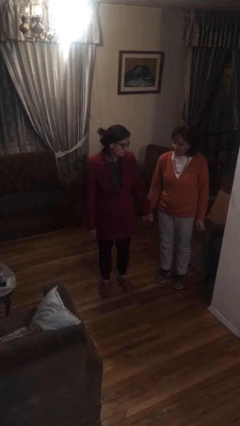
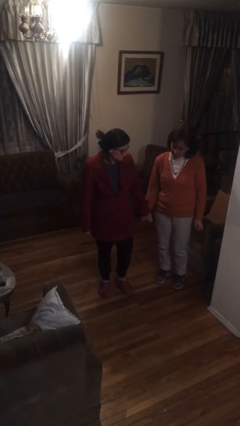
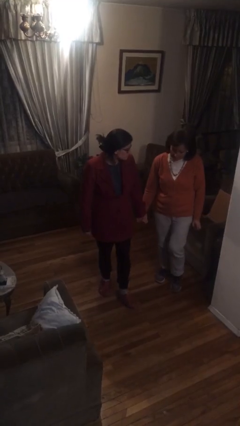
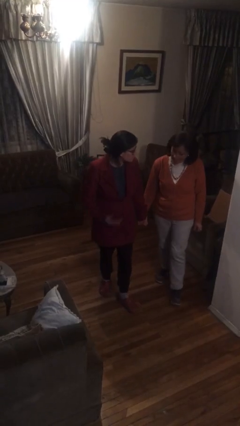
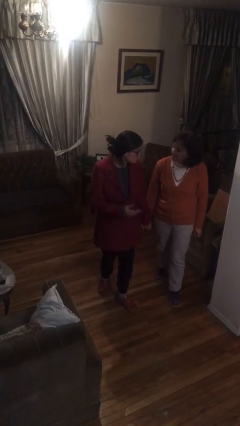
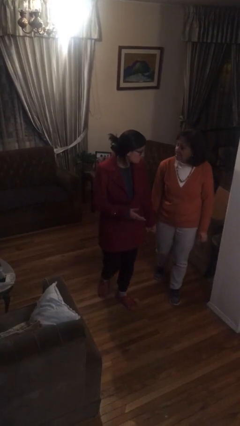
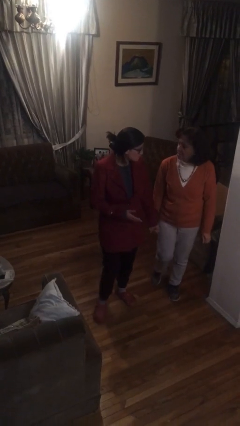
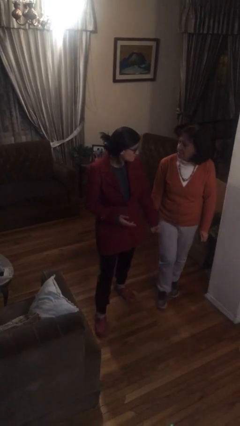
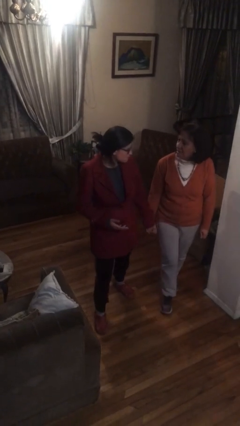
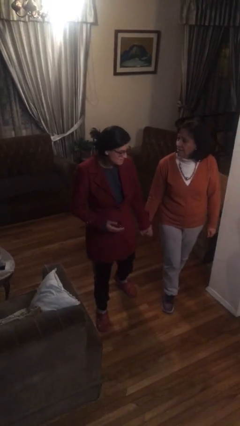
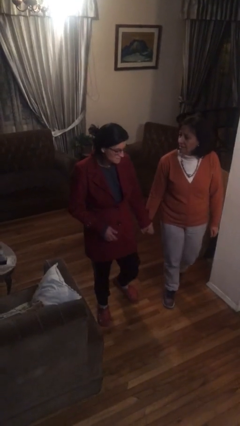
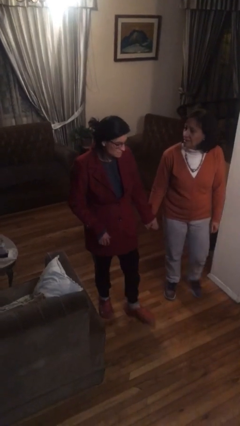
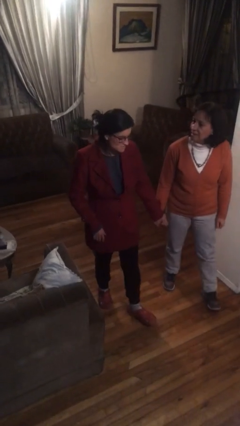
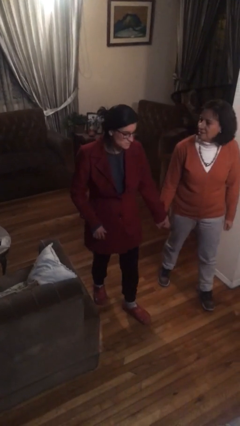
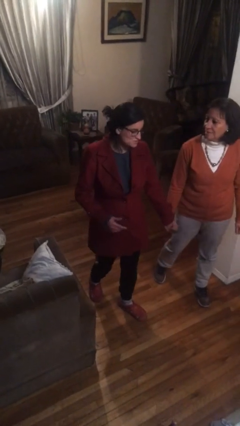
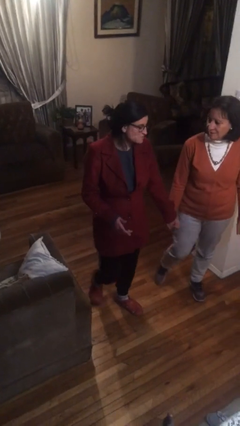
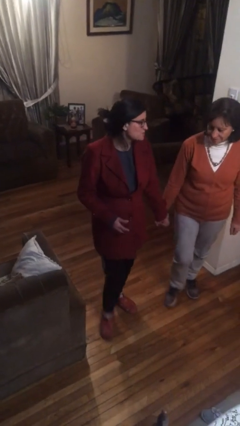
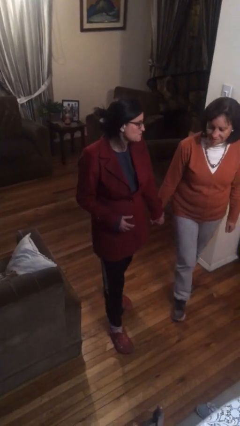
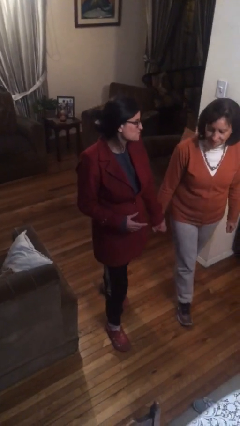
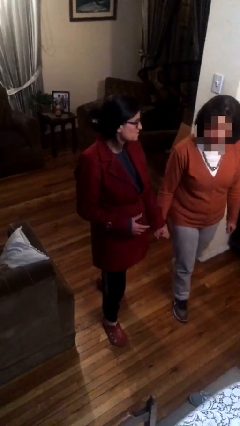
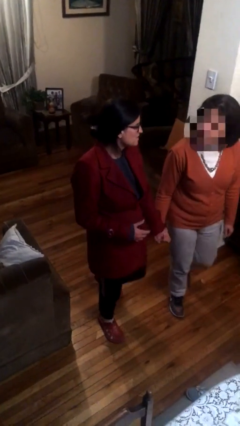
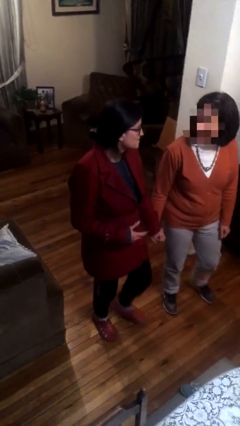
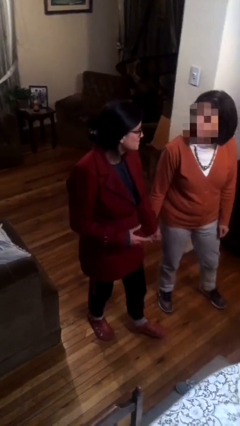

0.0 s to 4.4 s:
person holds hand

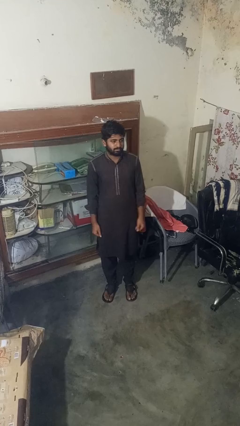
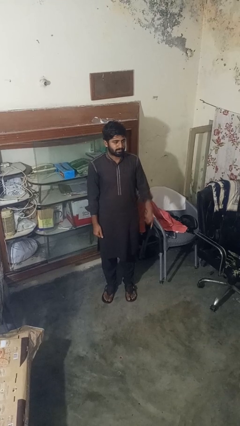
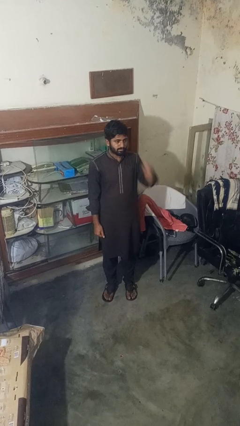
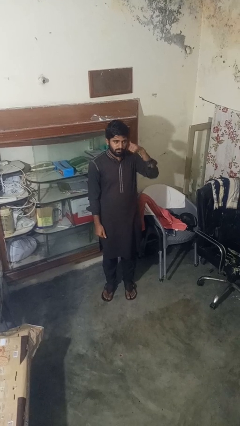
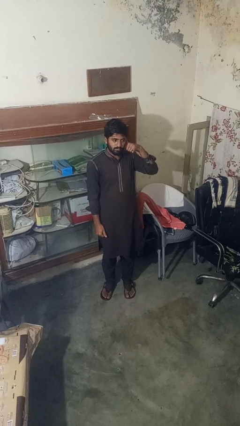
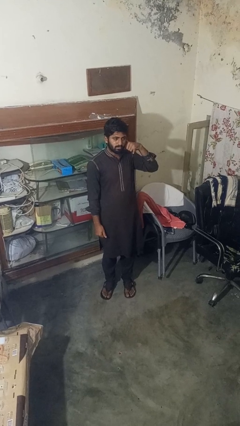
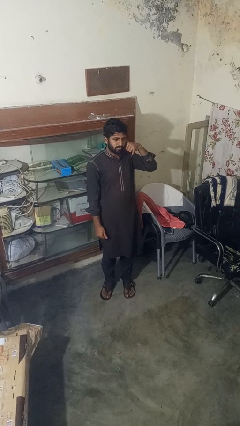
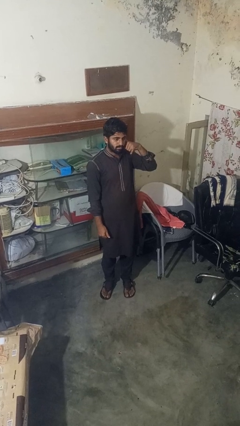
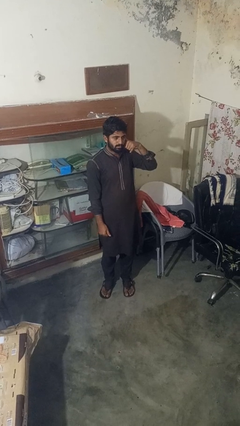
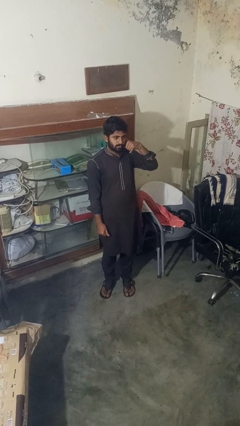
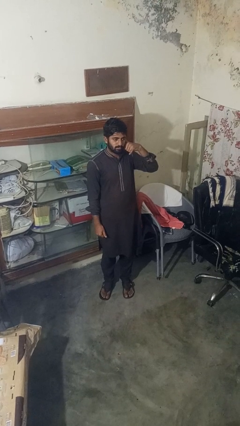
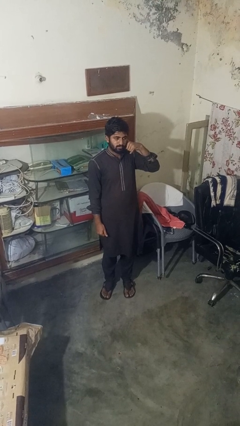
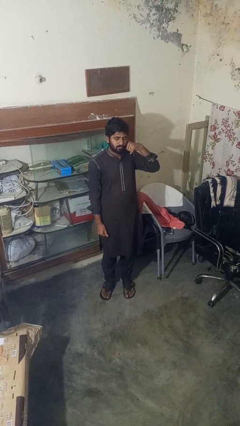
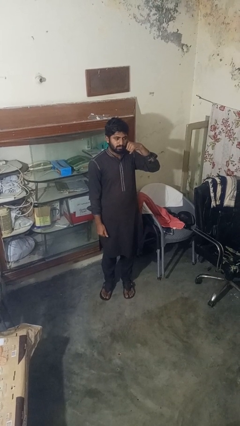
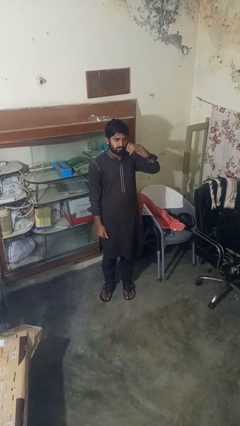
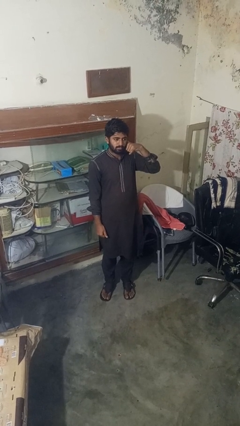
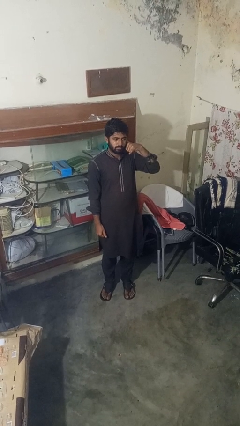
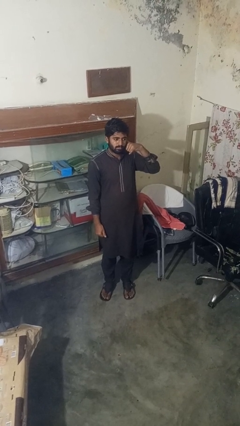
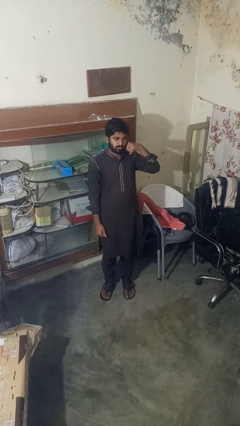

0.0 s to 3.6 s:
person gestures call me

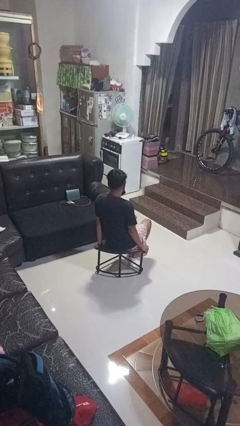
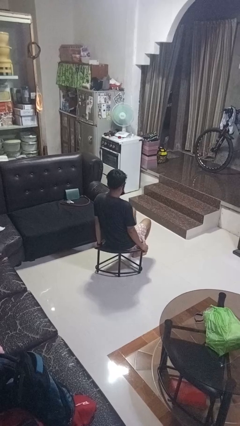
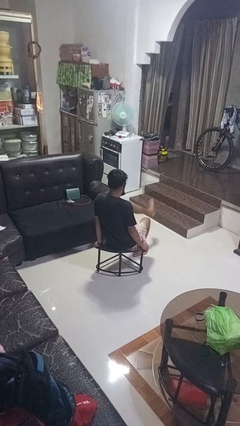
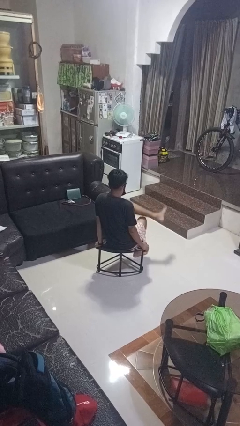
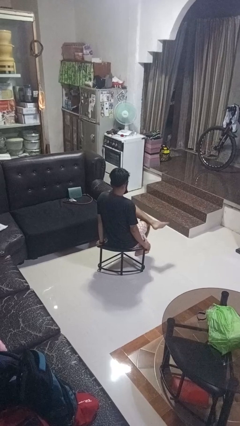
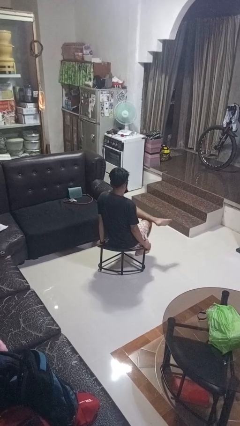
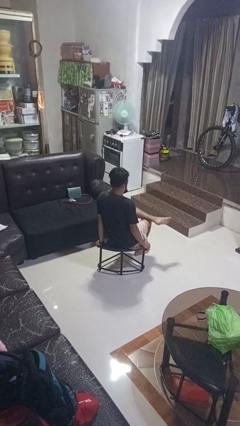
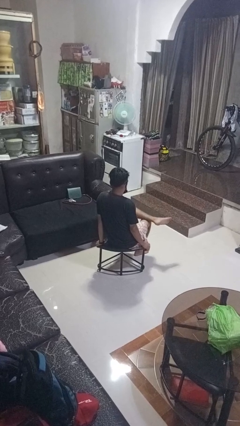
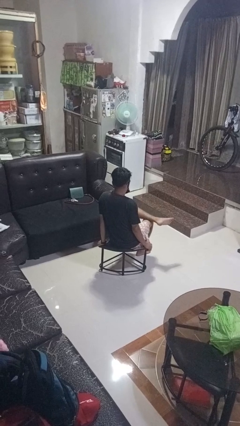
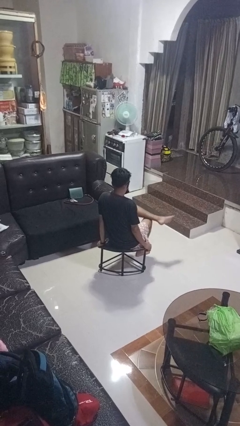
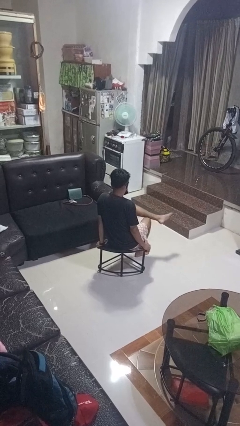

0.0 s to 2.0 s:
person crosses legs

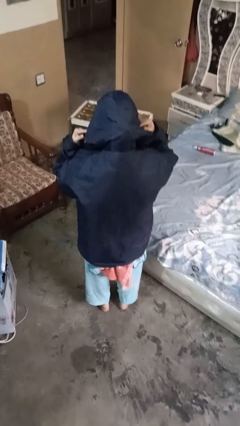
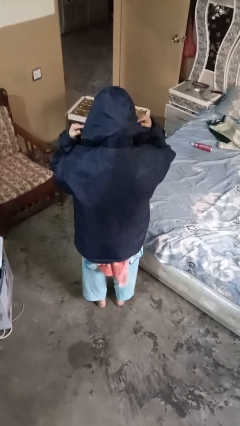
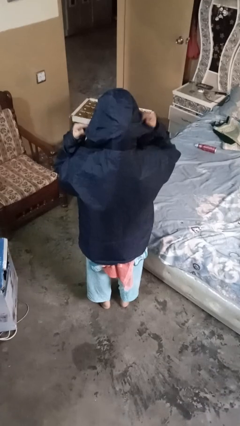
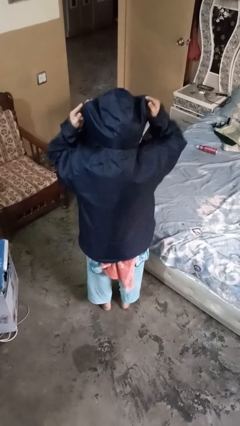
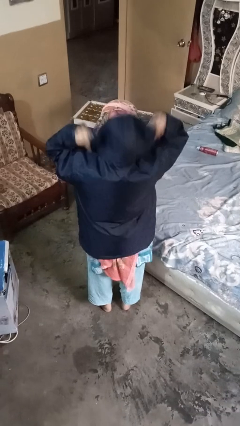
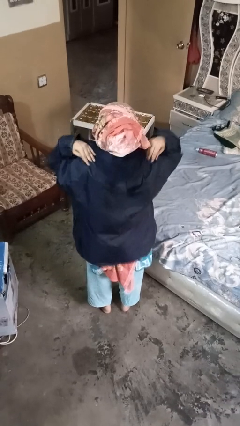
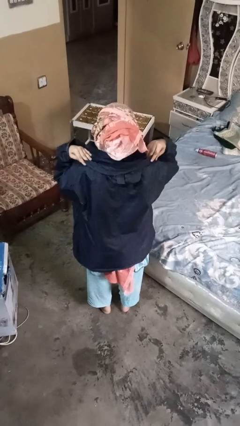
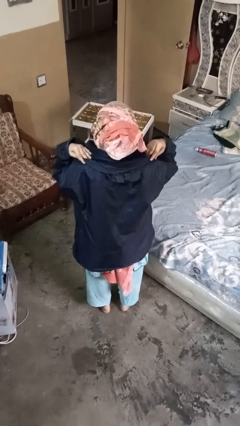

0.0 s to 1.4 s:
person takes off hoodie

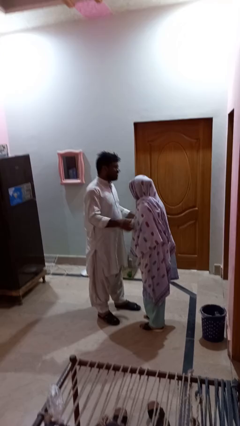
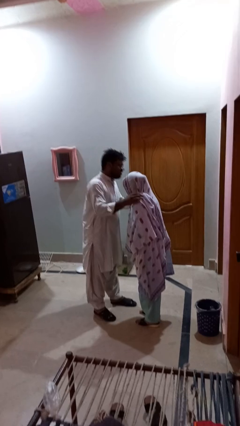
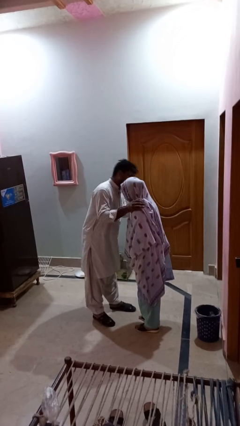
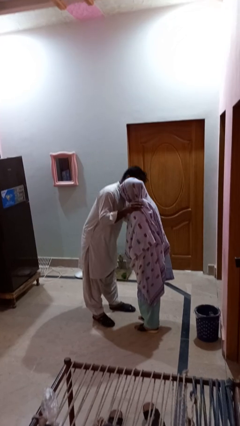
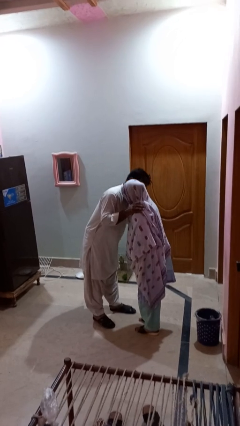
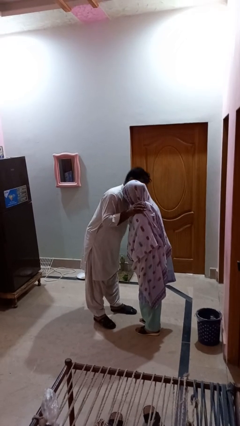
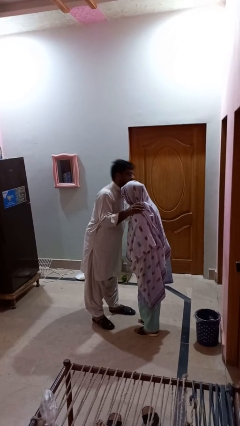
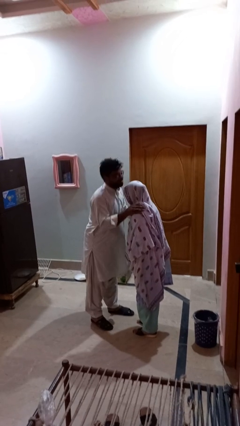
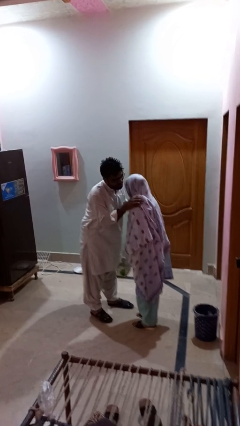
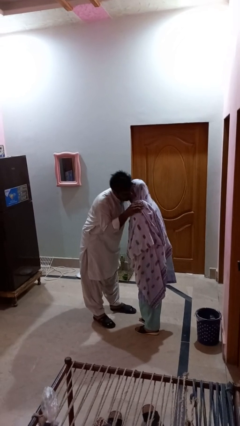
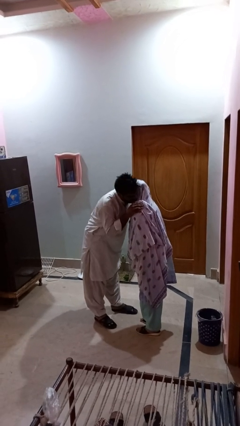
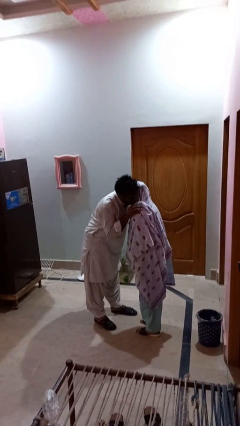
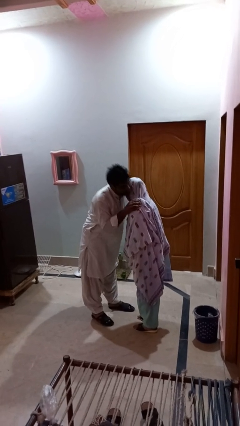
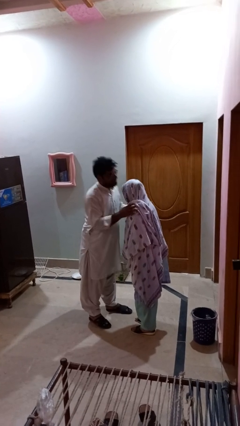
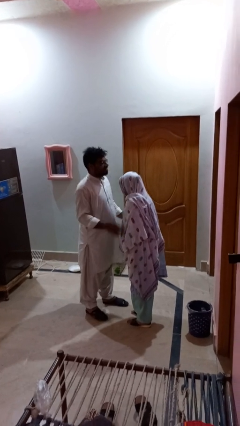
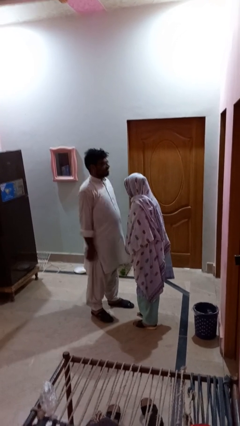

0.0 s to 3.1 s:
person kisses cheek of person

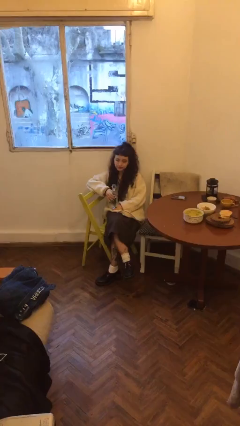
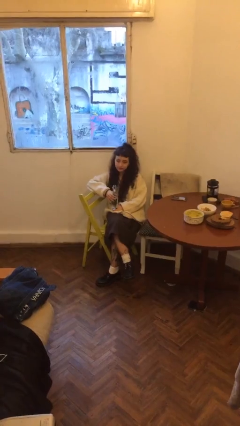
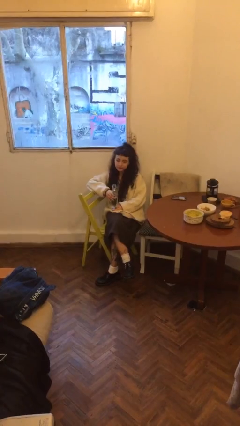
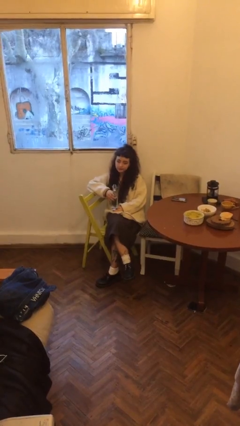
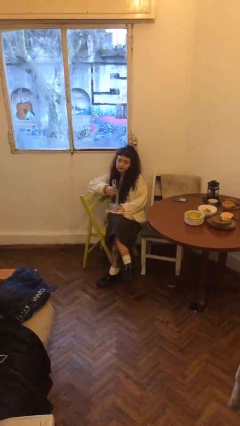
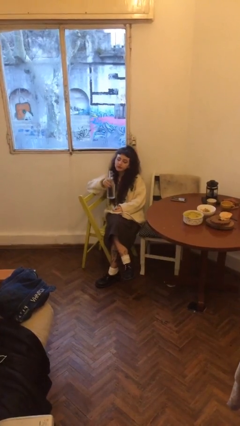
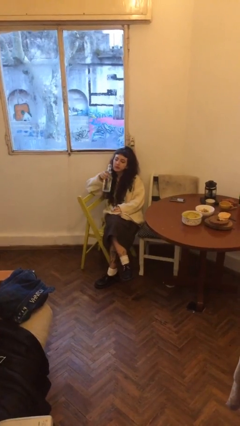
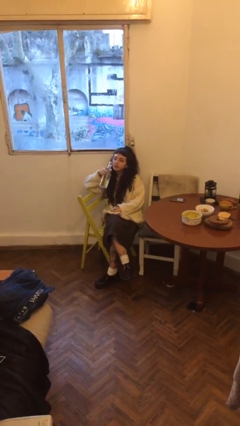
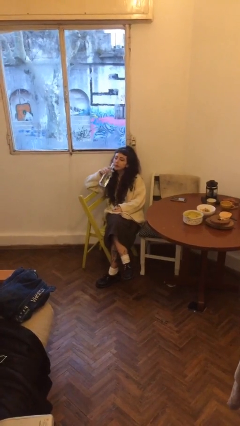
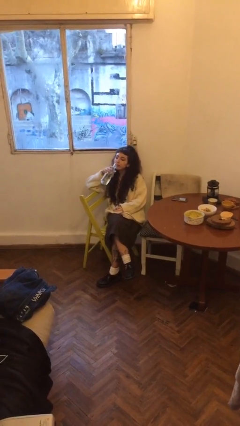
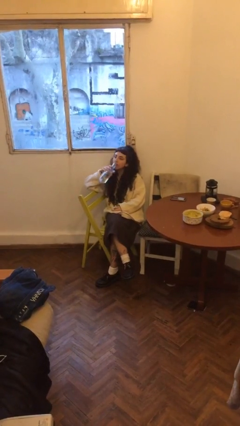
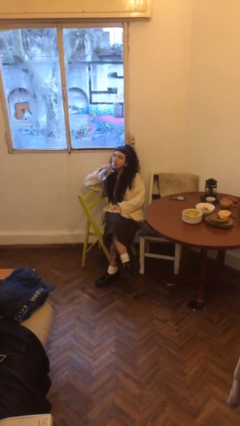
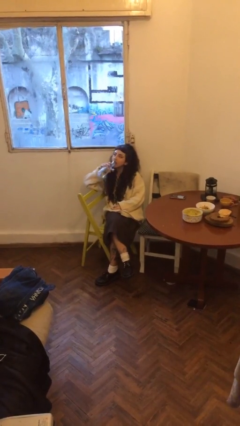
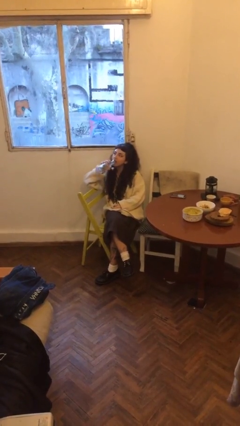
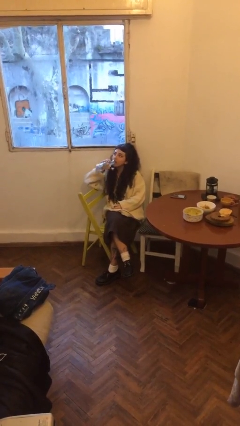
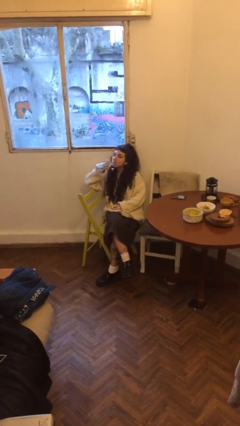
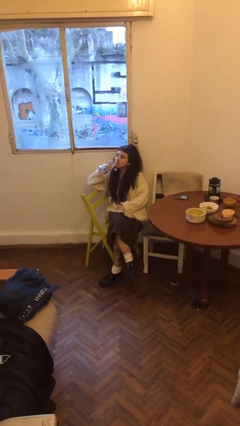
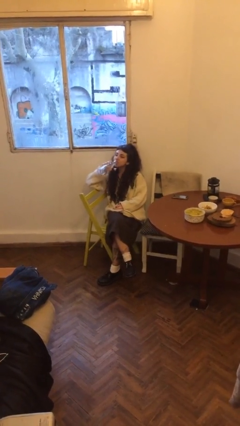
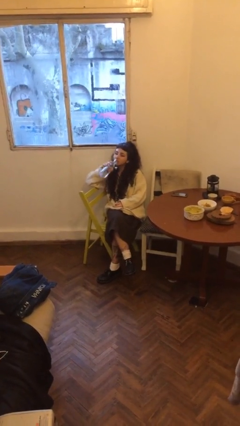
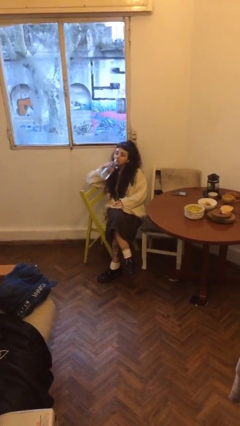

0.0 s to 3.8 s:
person drinks from bottle
